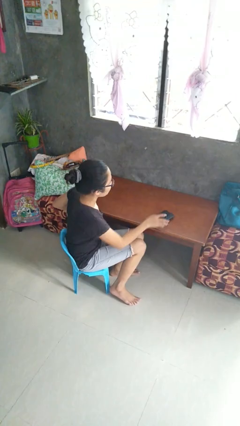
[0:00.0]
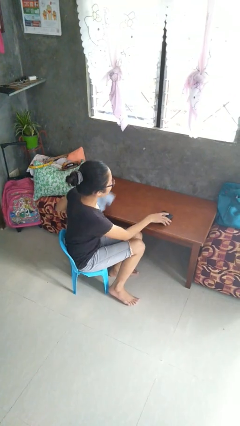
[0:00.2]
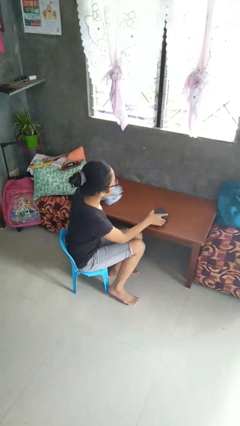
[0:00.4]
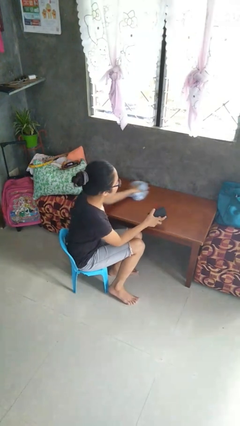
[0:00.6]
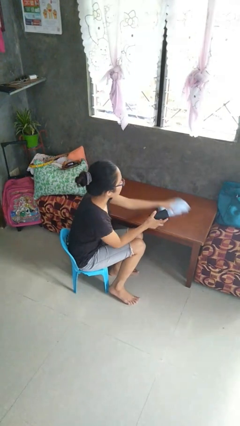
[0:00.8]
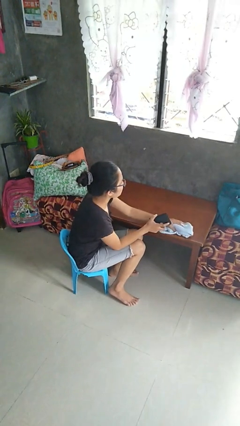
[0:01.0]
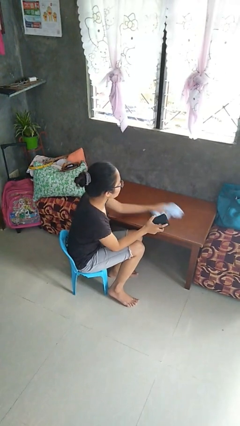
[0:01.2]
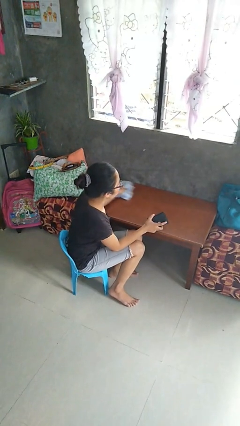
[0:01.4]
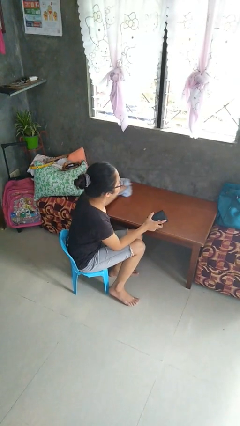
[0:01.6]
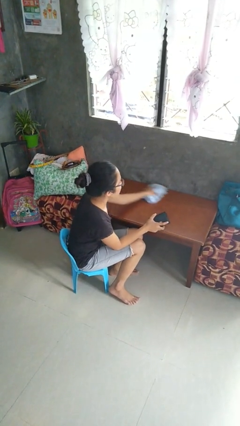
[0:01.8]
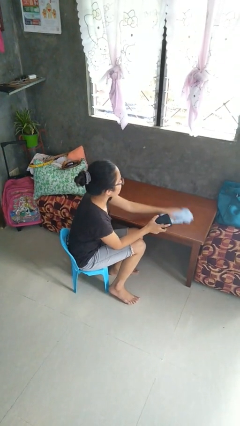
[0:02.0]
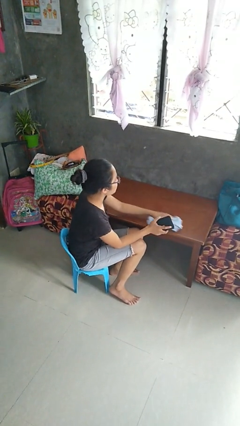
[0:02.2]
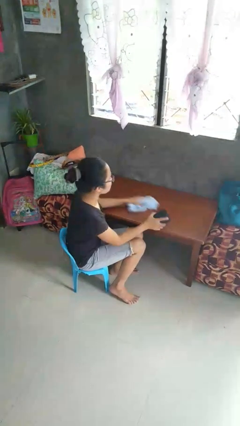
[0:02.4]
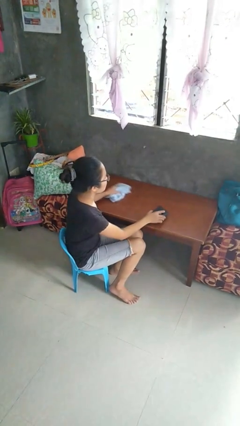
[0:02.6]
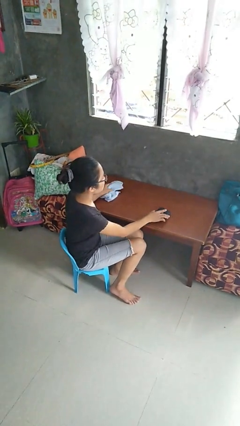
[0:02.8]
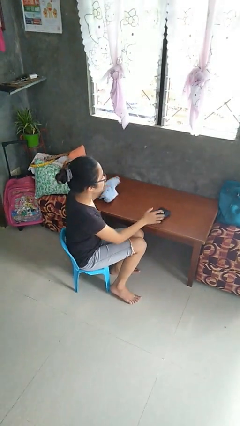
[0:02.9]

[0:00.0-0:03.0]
person cleans table with rag

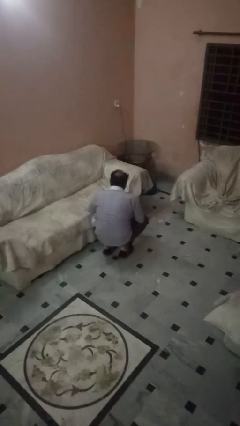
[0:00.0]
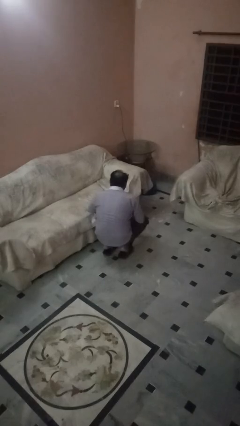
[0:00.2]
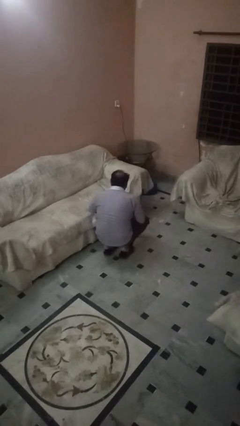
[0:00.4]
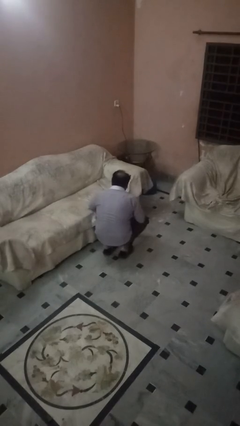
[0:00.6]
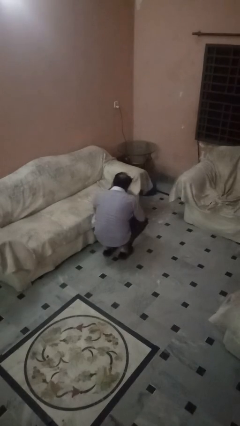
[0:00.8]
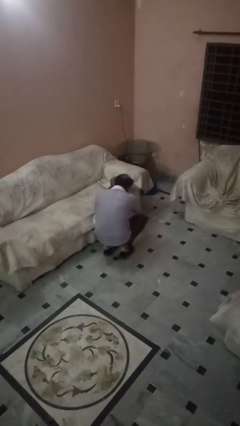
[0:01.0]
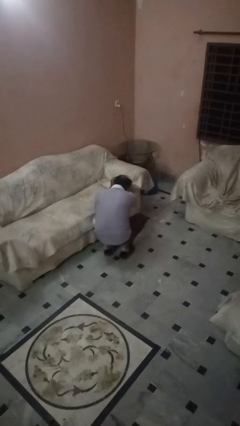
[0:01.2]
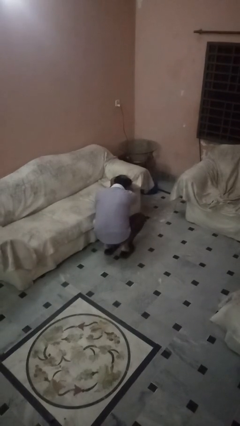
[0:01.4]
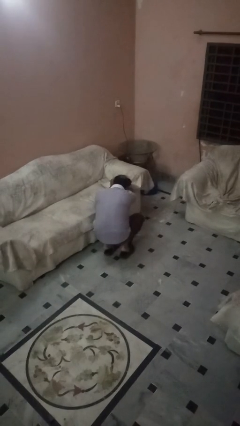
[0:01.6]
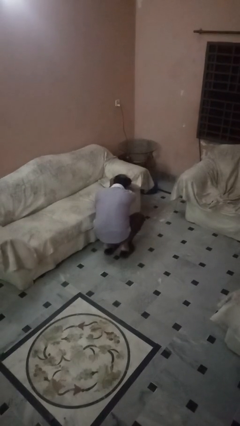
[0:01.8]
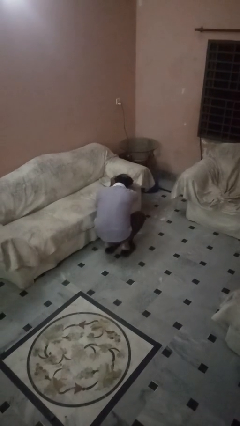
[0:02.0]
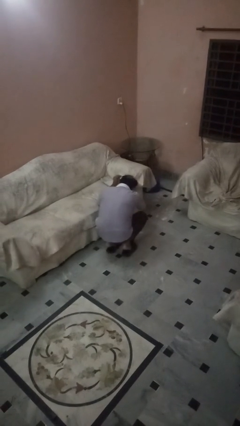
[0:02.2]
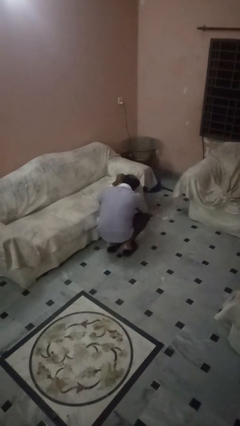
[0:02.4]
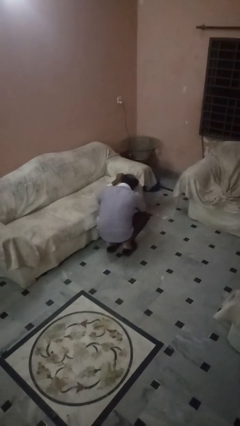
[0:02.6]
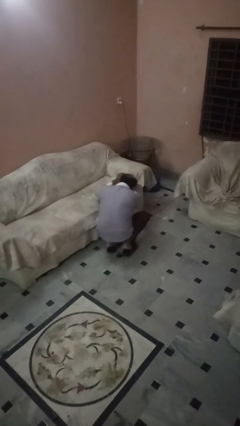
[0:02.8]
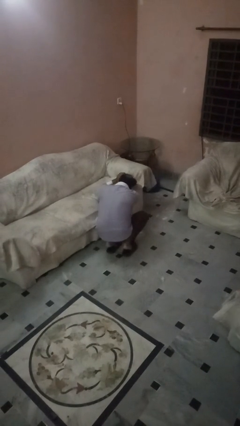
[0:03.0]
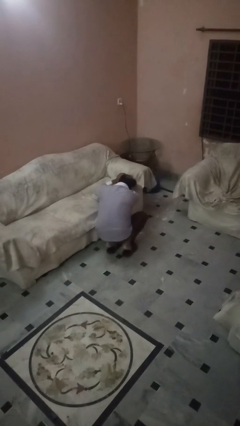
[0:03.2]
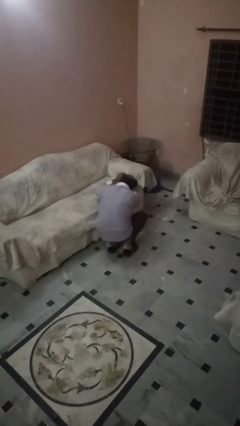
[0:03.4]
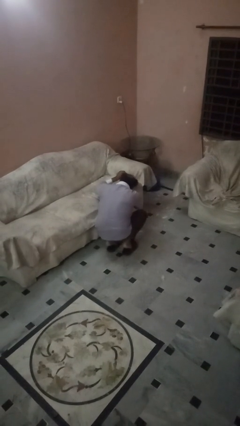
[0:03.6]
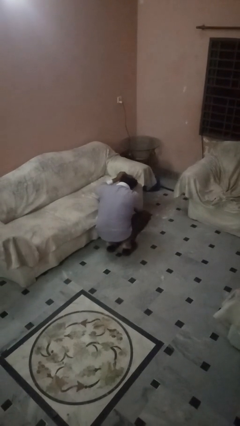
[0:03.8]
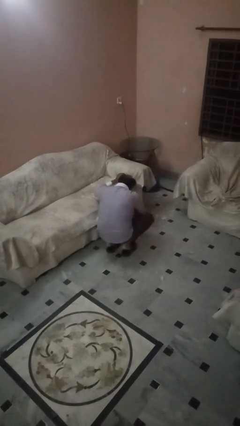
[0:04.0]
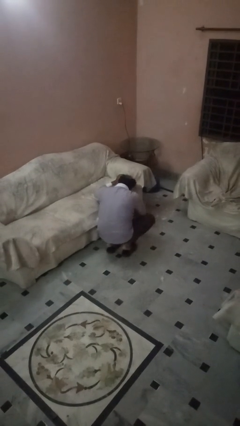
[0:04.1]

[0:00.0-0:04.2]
person searches in couch

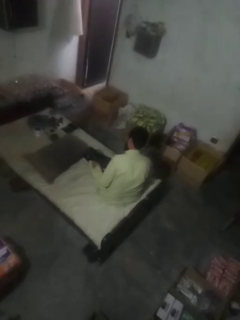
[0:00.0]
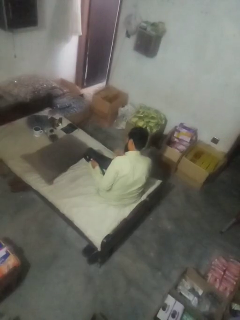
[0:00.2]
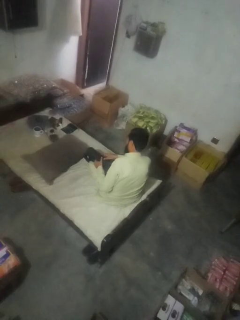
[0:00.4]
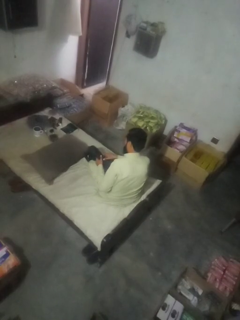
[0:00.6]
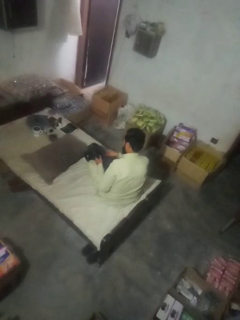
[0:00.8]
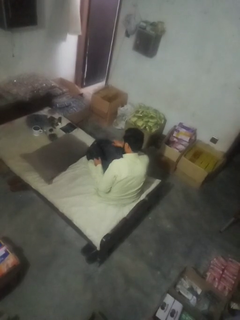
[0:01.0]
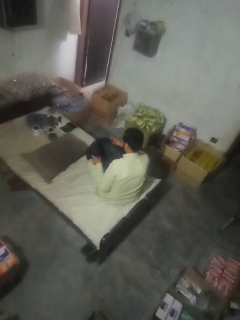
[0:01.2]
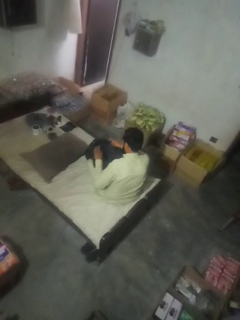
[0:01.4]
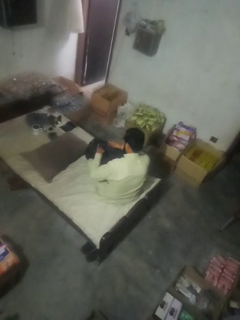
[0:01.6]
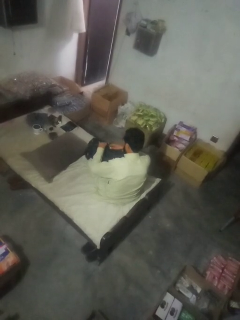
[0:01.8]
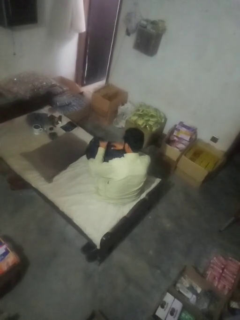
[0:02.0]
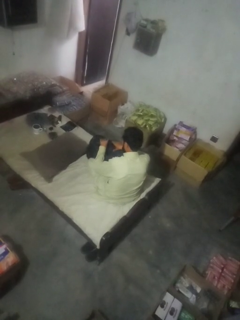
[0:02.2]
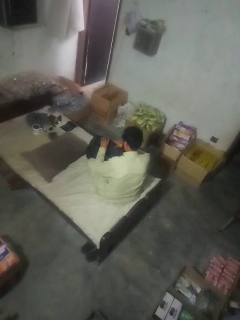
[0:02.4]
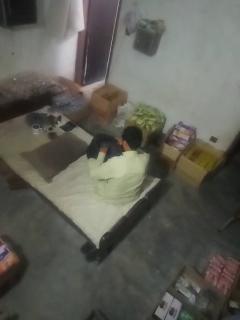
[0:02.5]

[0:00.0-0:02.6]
person searches in bag

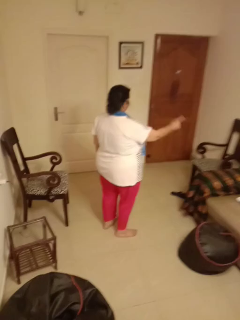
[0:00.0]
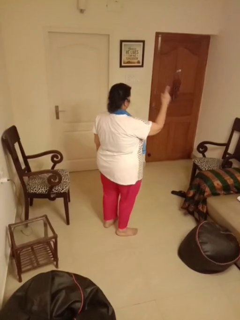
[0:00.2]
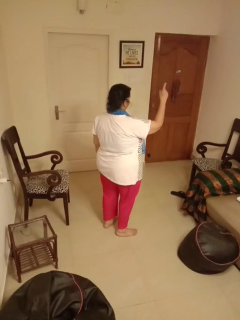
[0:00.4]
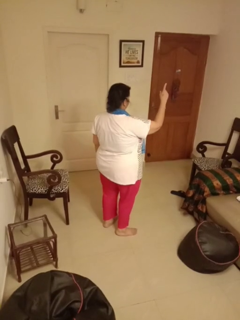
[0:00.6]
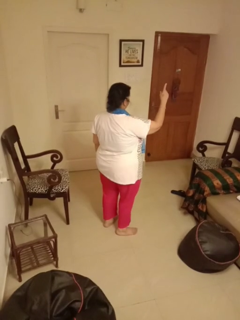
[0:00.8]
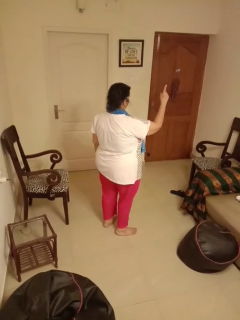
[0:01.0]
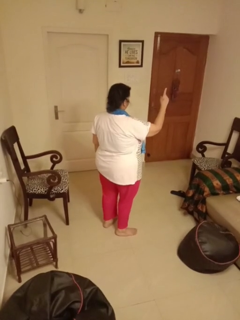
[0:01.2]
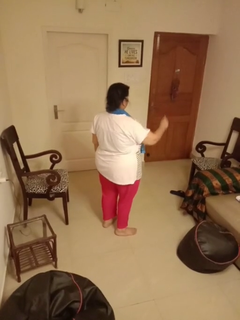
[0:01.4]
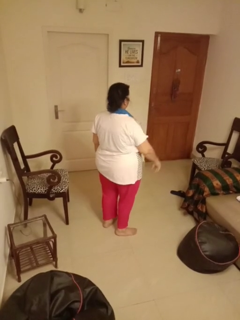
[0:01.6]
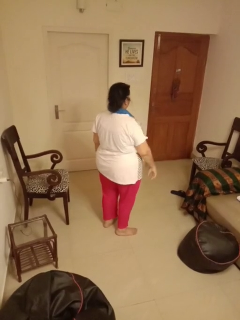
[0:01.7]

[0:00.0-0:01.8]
person gestures number one

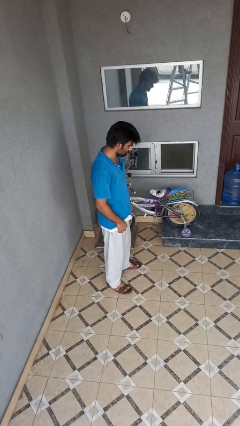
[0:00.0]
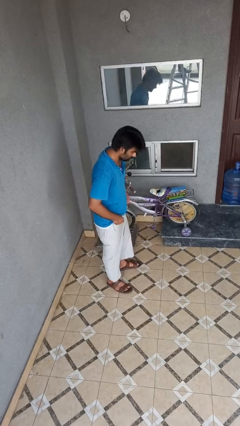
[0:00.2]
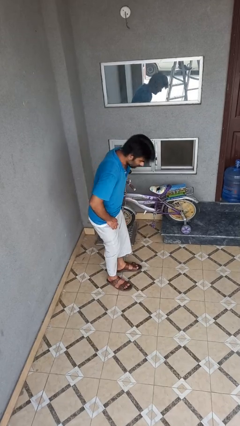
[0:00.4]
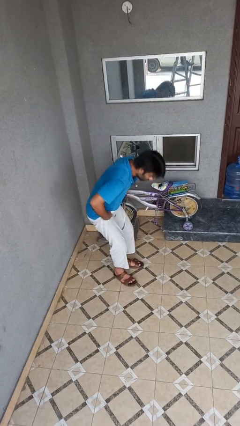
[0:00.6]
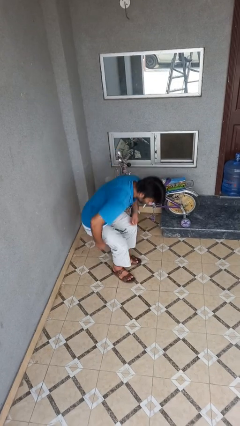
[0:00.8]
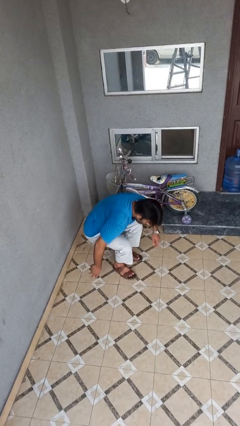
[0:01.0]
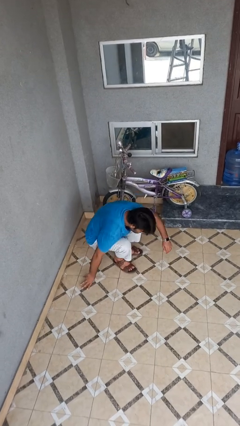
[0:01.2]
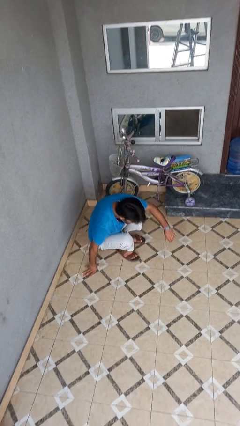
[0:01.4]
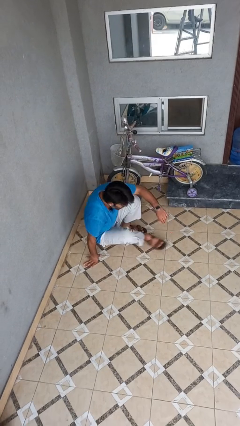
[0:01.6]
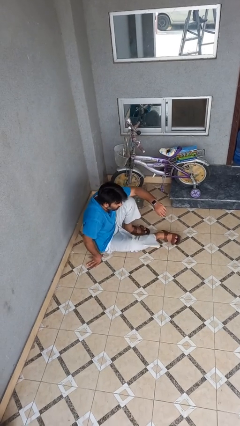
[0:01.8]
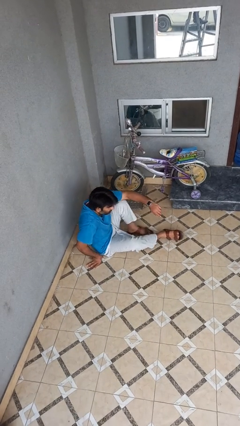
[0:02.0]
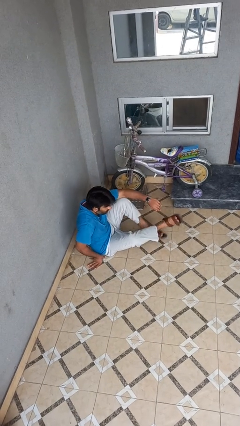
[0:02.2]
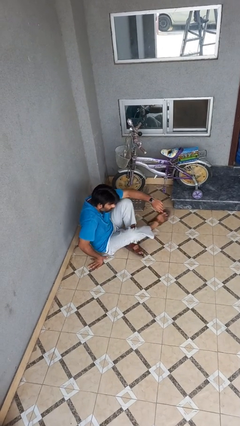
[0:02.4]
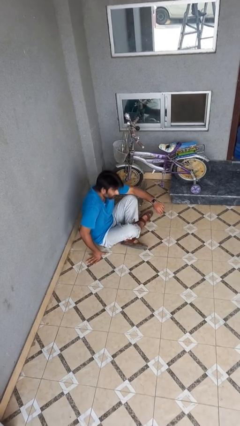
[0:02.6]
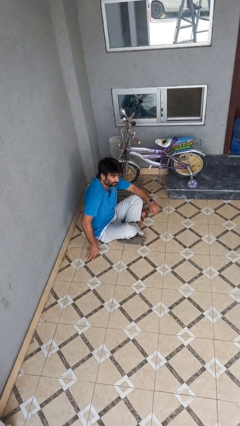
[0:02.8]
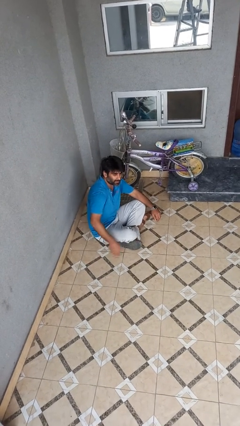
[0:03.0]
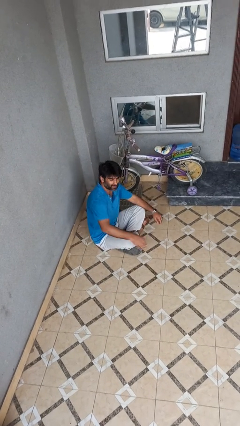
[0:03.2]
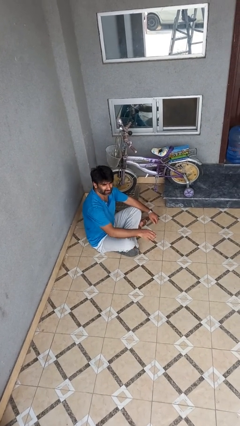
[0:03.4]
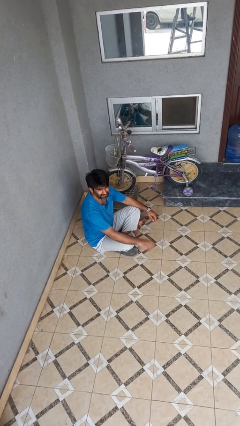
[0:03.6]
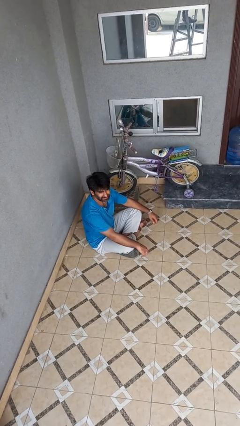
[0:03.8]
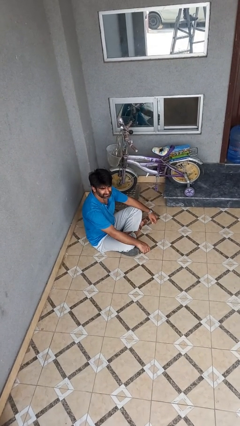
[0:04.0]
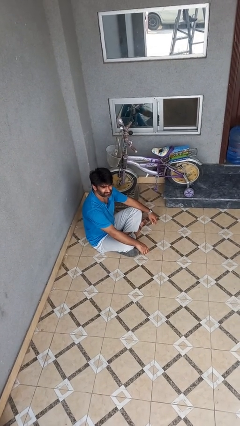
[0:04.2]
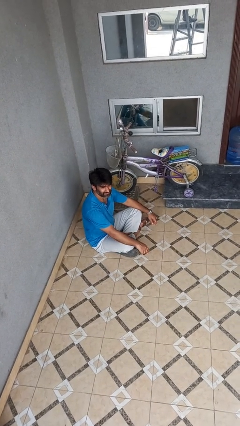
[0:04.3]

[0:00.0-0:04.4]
person sits crisscross

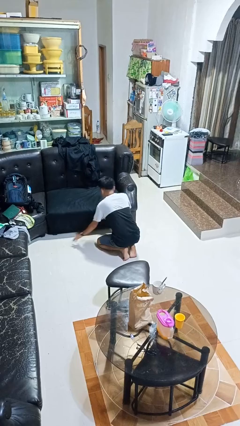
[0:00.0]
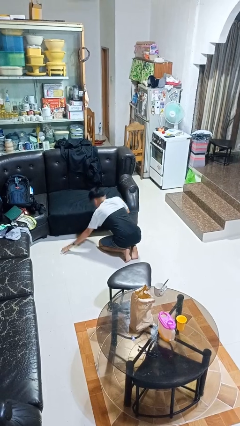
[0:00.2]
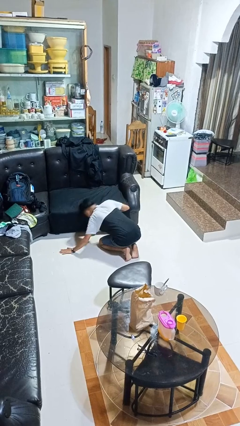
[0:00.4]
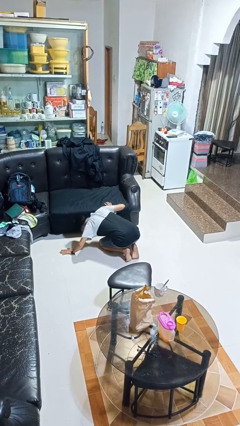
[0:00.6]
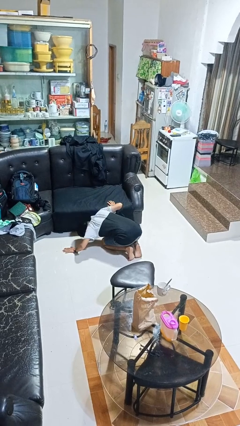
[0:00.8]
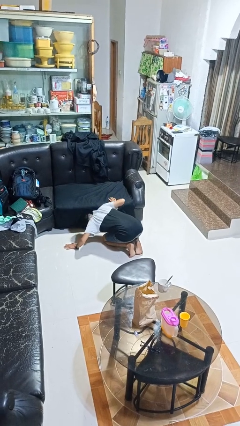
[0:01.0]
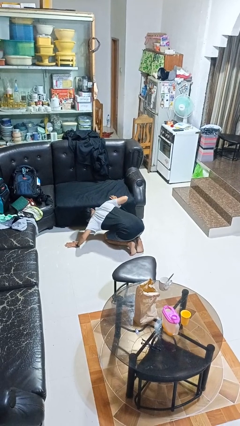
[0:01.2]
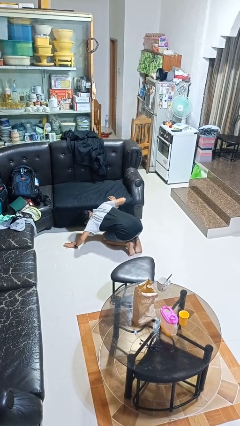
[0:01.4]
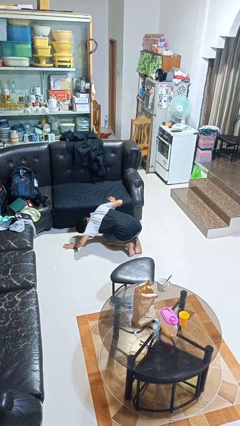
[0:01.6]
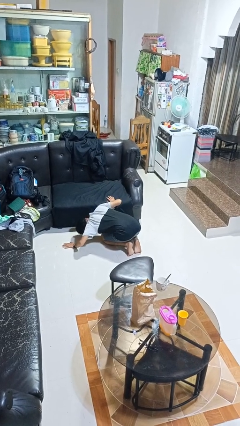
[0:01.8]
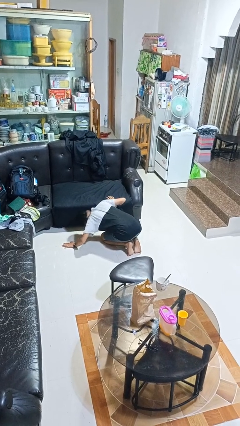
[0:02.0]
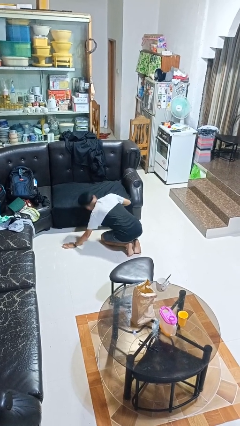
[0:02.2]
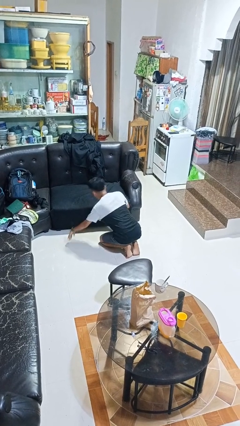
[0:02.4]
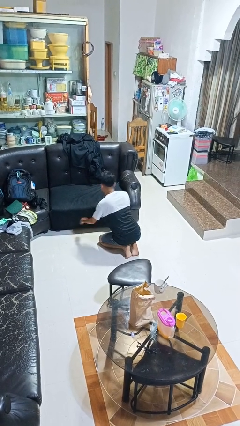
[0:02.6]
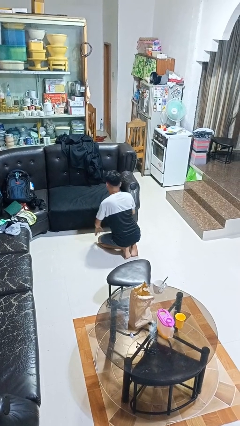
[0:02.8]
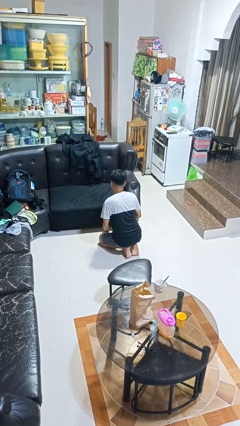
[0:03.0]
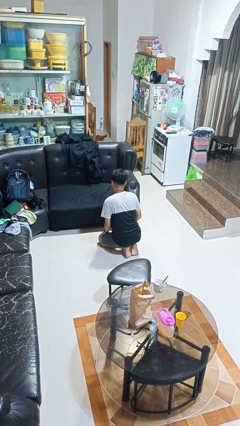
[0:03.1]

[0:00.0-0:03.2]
person searches under couch
